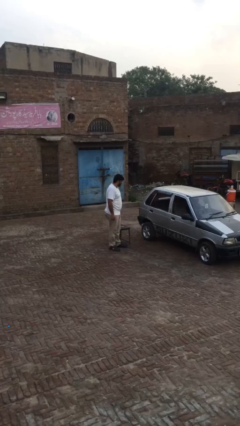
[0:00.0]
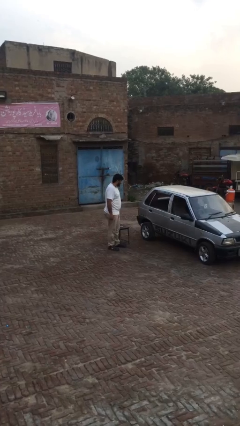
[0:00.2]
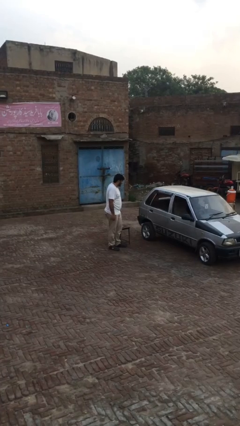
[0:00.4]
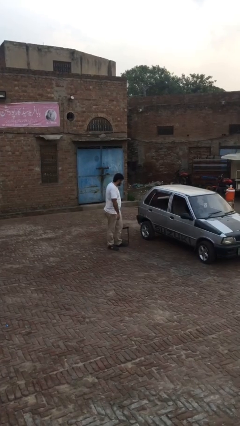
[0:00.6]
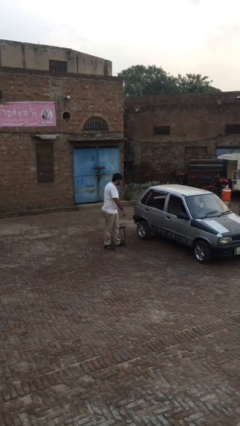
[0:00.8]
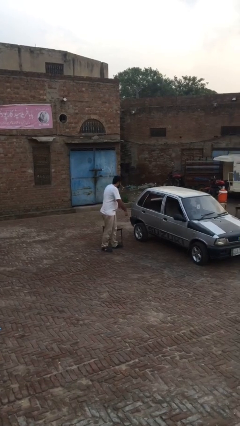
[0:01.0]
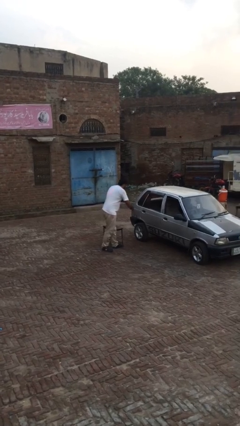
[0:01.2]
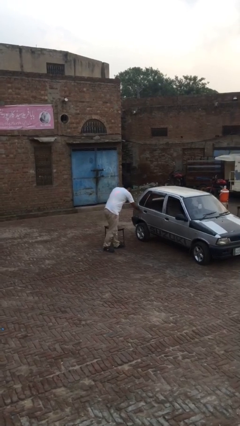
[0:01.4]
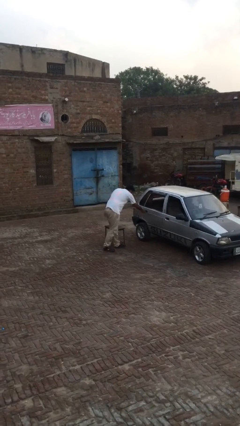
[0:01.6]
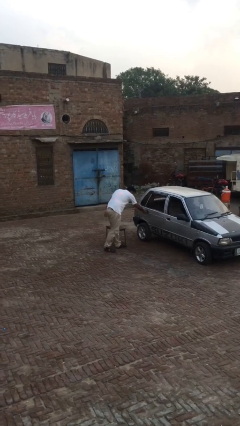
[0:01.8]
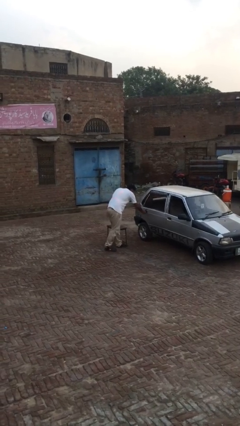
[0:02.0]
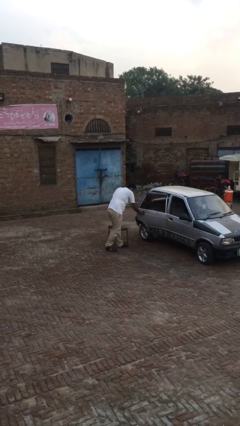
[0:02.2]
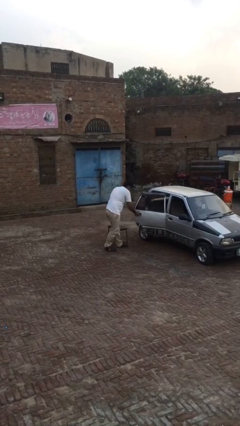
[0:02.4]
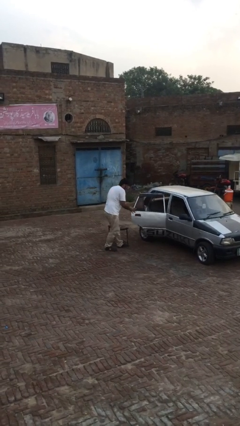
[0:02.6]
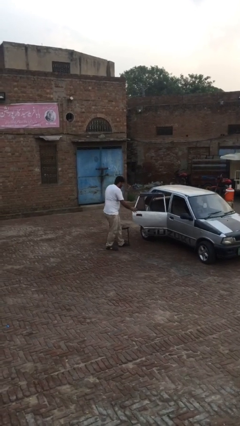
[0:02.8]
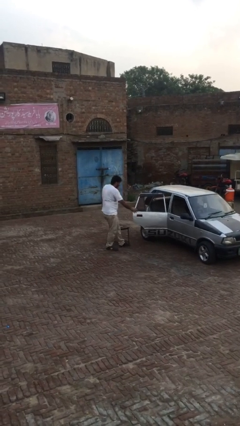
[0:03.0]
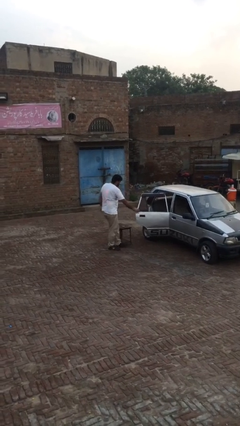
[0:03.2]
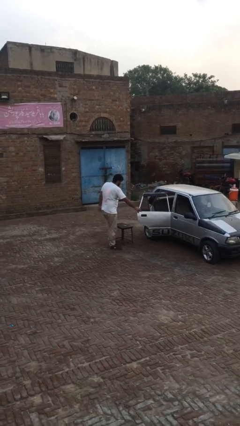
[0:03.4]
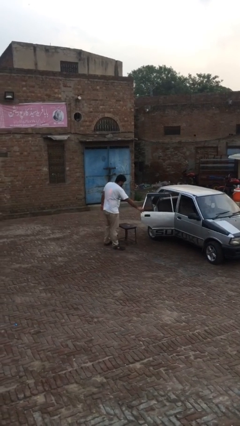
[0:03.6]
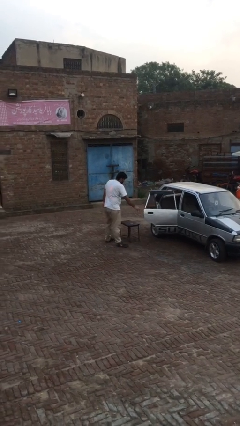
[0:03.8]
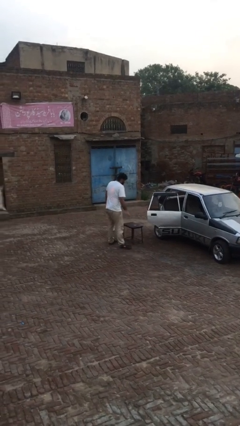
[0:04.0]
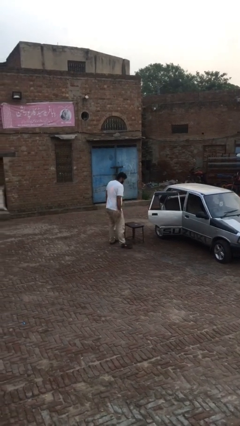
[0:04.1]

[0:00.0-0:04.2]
person opens car door

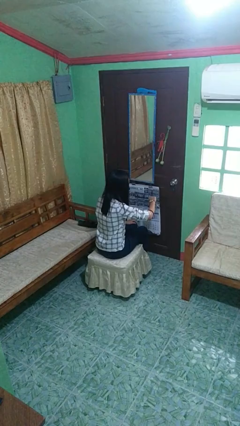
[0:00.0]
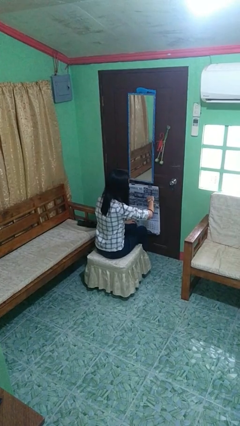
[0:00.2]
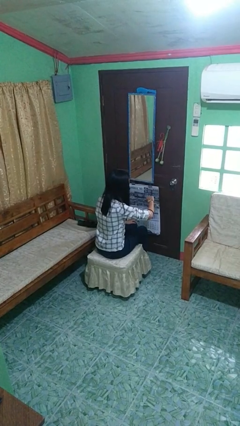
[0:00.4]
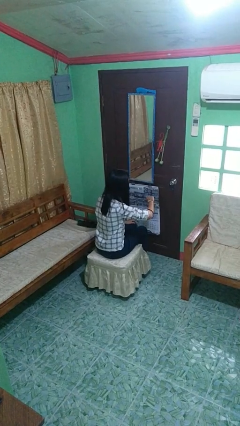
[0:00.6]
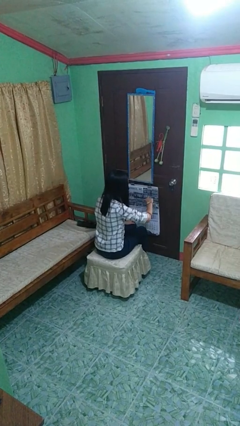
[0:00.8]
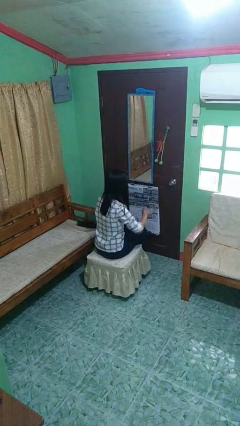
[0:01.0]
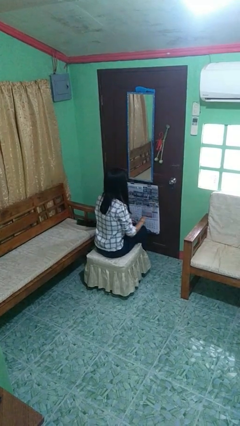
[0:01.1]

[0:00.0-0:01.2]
person looks at wristwatch

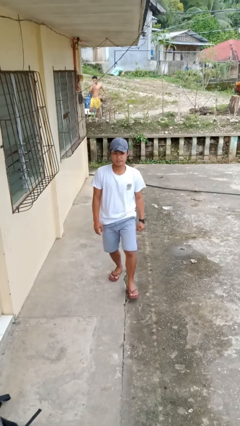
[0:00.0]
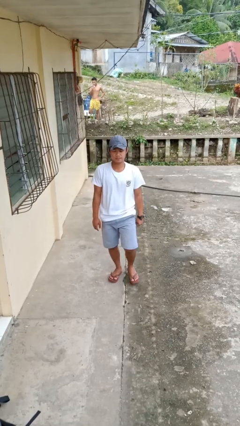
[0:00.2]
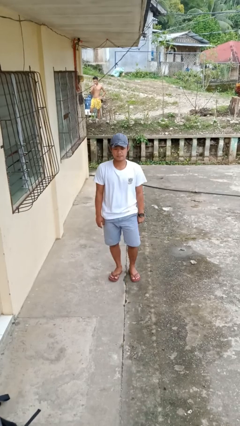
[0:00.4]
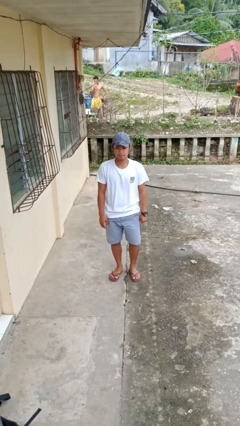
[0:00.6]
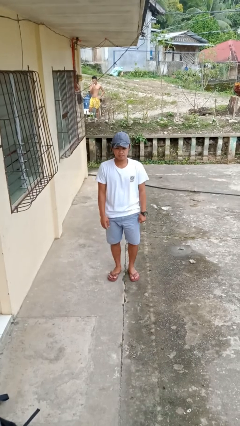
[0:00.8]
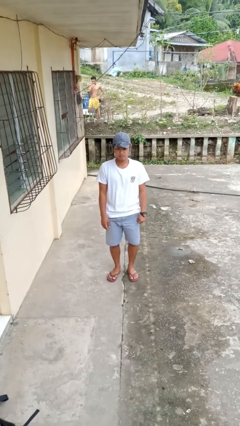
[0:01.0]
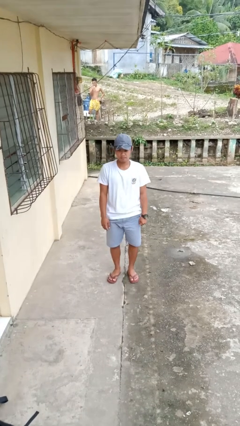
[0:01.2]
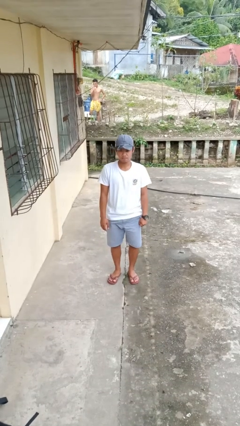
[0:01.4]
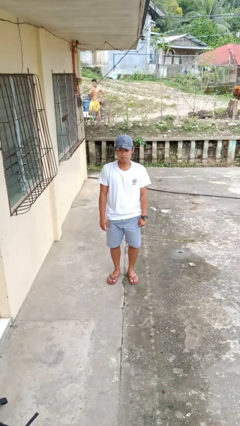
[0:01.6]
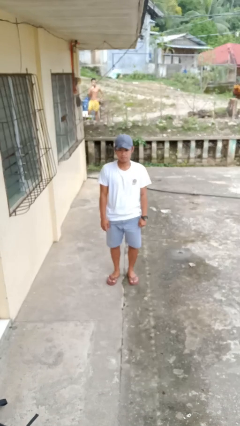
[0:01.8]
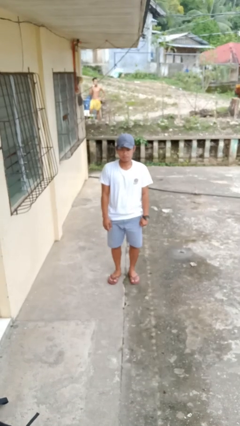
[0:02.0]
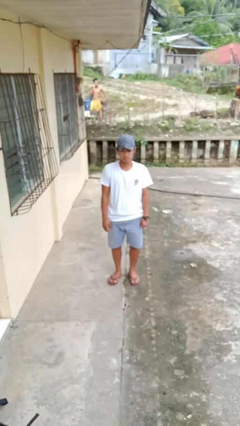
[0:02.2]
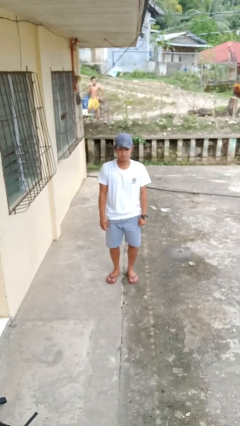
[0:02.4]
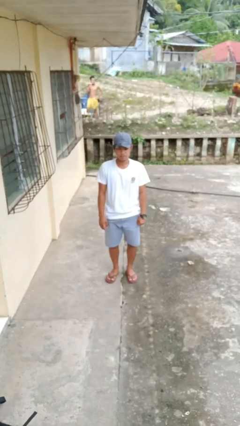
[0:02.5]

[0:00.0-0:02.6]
person stands up from floor

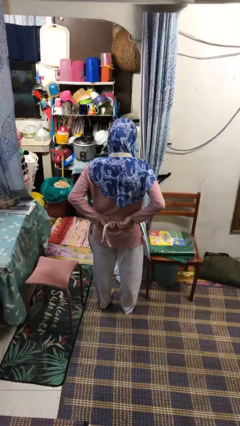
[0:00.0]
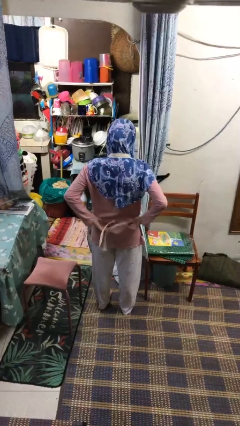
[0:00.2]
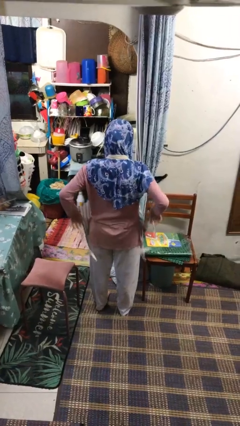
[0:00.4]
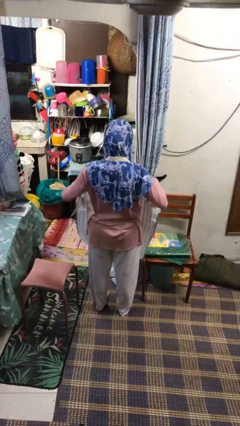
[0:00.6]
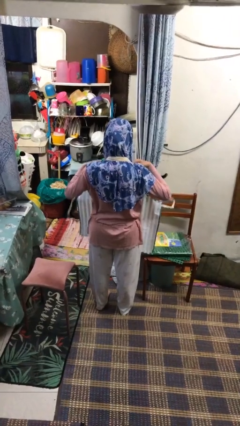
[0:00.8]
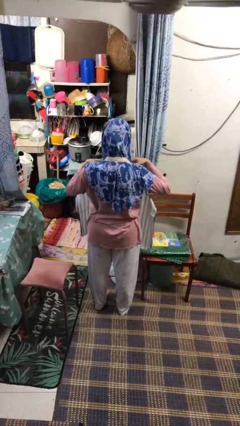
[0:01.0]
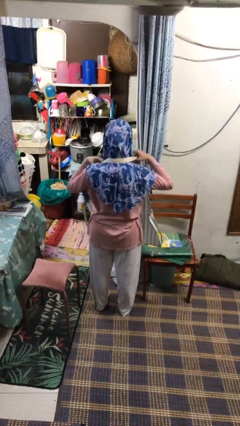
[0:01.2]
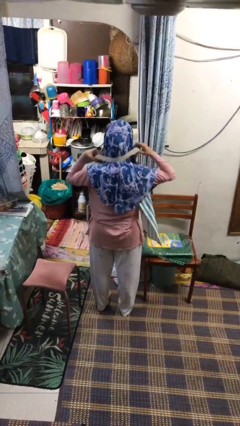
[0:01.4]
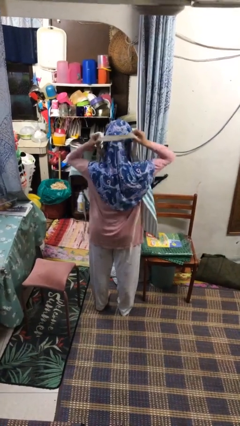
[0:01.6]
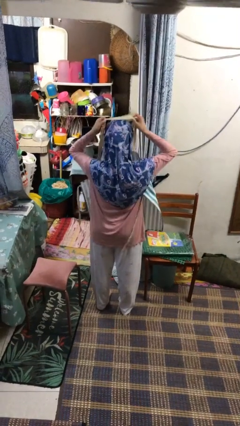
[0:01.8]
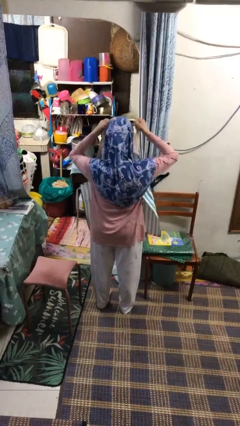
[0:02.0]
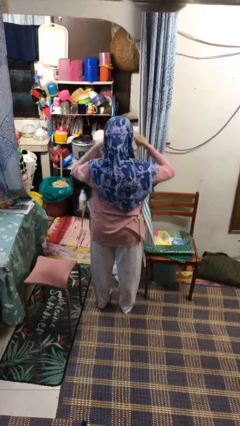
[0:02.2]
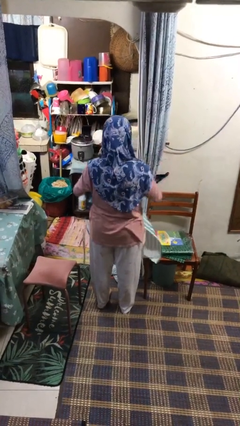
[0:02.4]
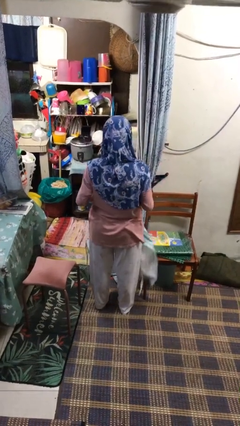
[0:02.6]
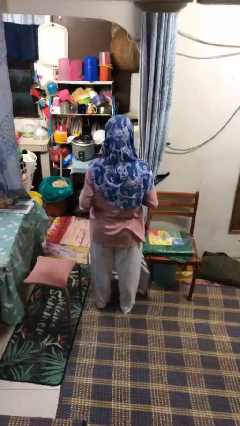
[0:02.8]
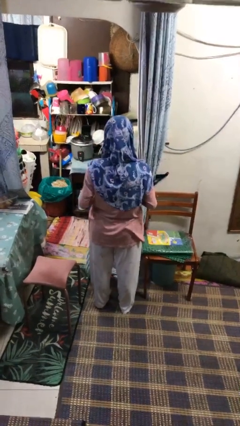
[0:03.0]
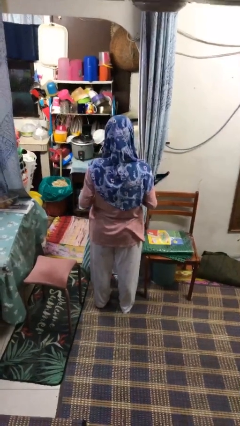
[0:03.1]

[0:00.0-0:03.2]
person takes off apron

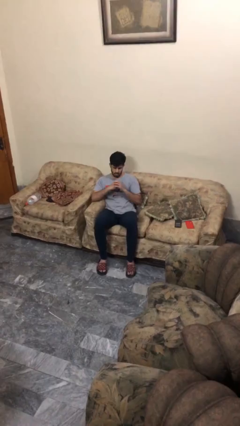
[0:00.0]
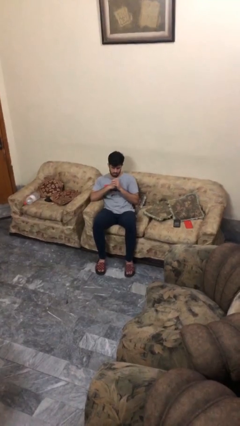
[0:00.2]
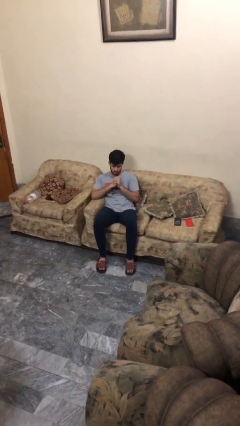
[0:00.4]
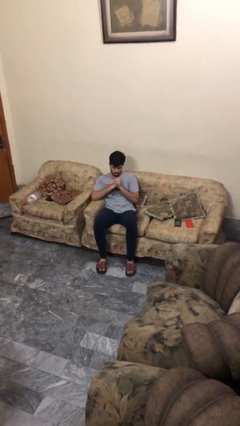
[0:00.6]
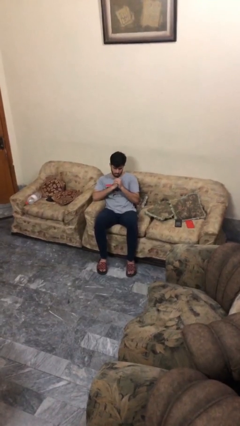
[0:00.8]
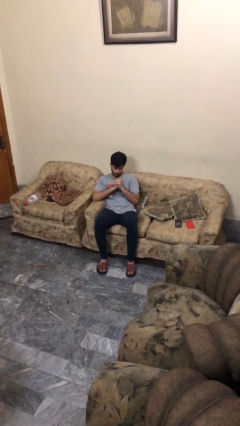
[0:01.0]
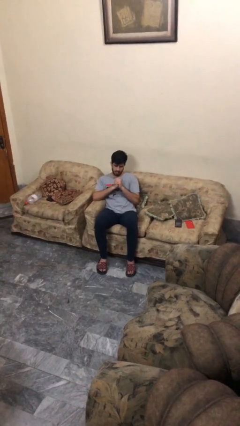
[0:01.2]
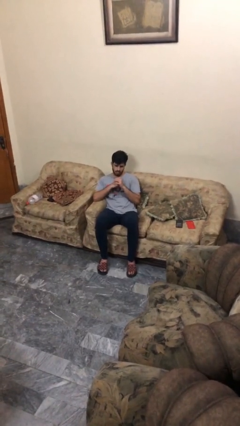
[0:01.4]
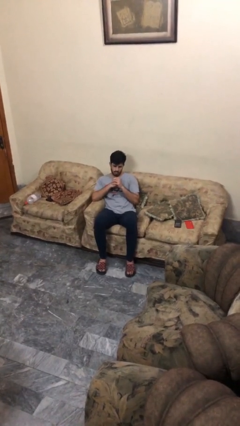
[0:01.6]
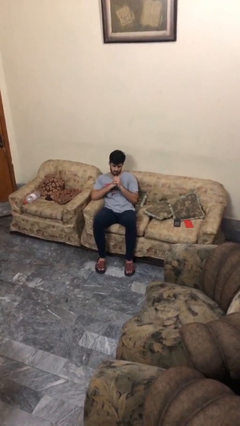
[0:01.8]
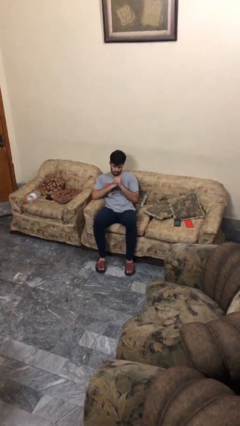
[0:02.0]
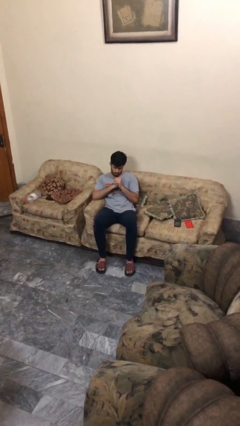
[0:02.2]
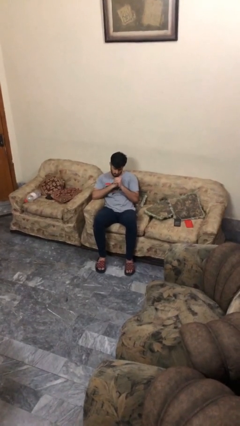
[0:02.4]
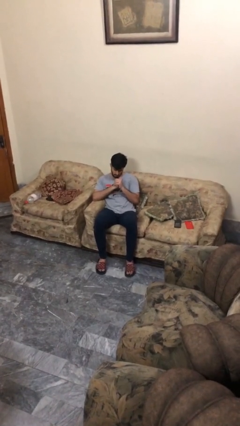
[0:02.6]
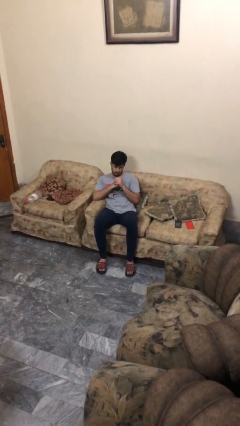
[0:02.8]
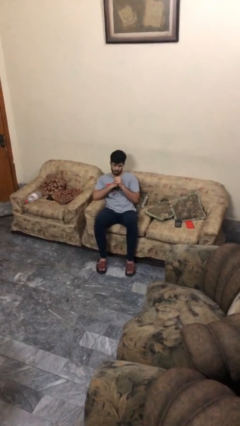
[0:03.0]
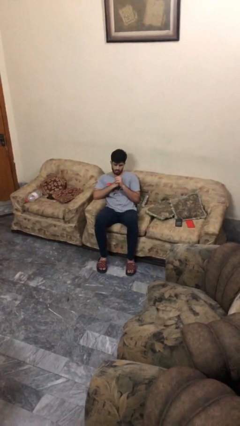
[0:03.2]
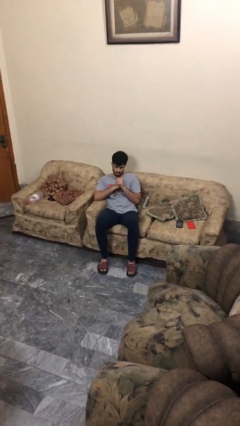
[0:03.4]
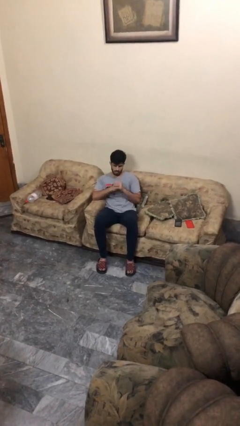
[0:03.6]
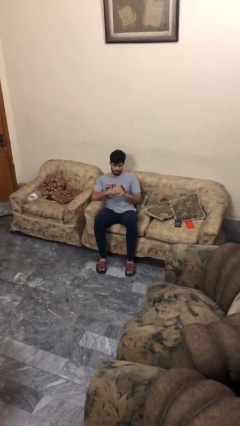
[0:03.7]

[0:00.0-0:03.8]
person cracks knuckles

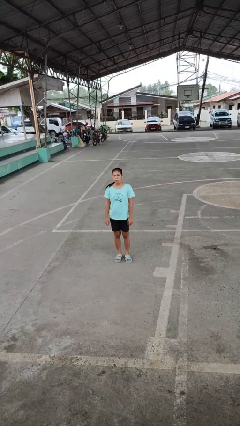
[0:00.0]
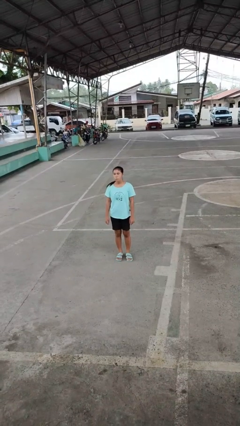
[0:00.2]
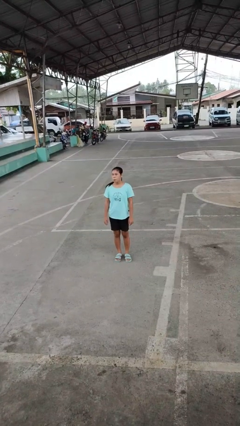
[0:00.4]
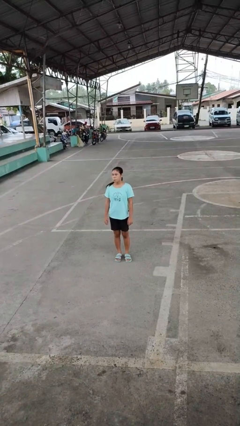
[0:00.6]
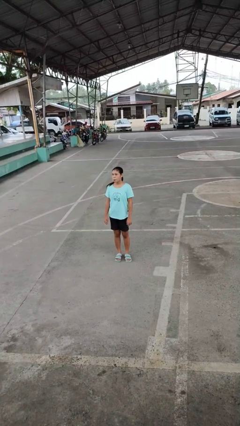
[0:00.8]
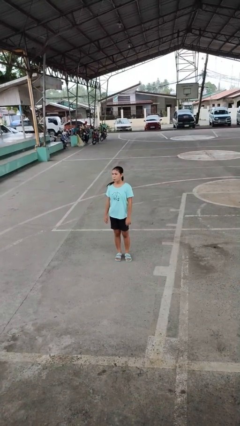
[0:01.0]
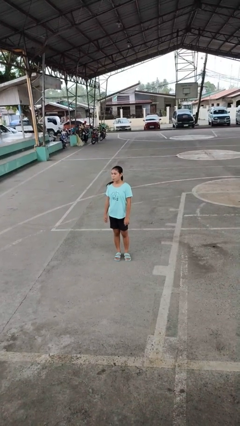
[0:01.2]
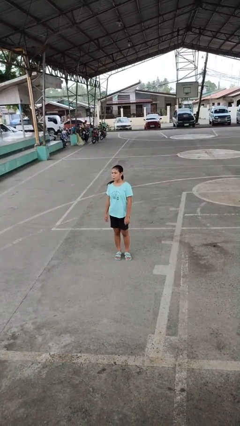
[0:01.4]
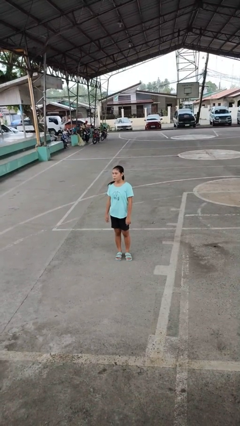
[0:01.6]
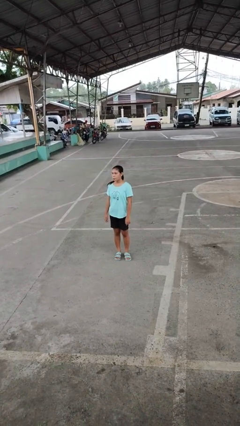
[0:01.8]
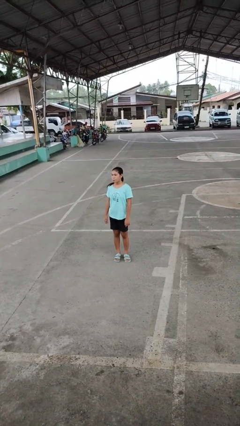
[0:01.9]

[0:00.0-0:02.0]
person sticks out tongue

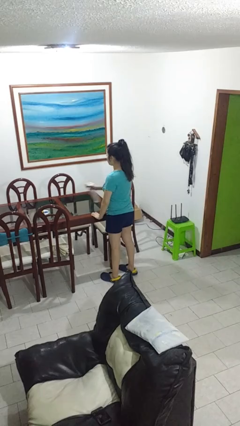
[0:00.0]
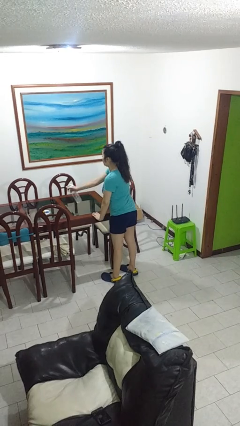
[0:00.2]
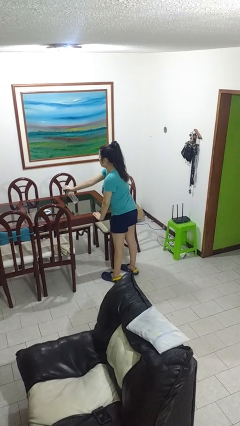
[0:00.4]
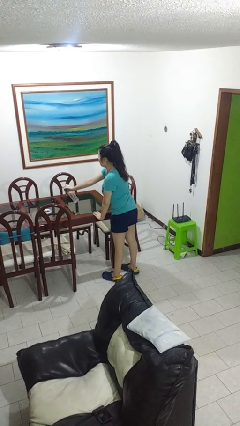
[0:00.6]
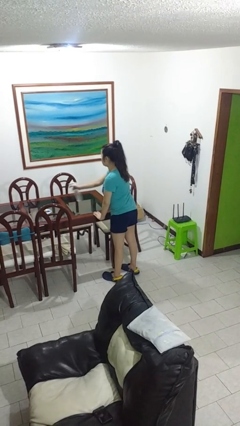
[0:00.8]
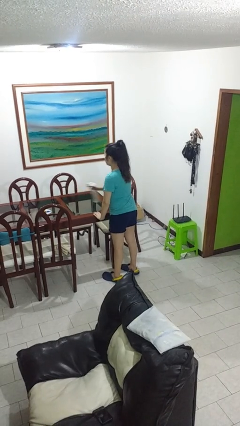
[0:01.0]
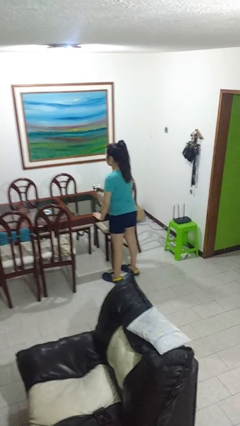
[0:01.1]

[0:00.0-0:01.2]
person sprays from bottle
